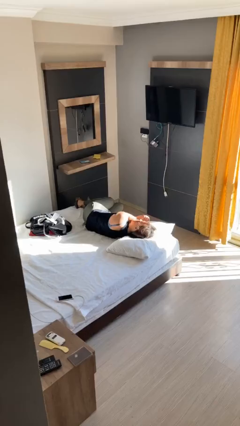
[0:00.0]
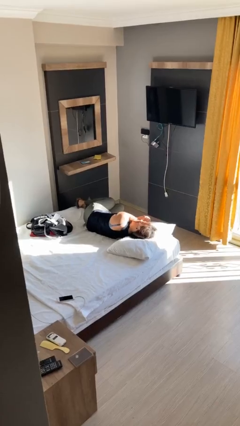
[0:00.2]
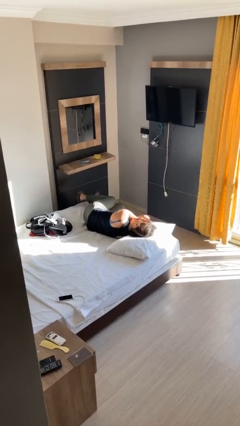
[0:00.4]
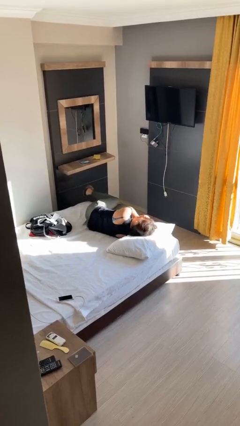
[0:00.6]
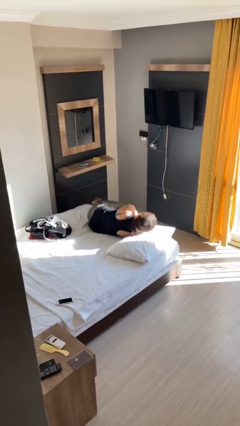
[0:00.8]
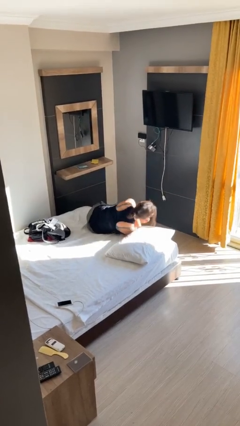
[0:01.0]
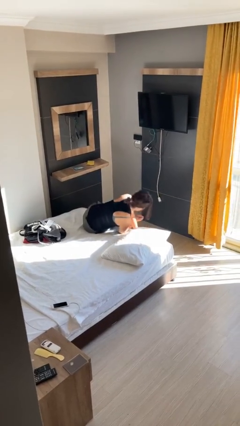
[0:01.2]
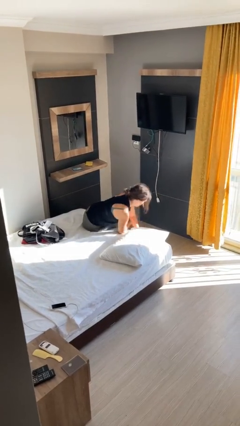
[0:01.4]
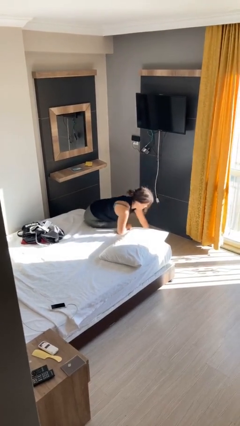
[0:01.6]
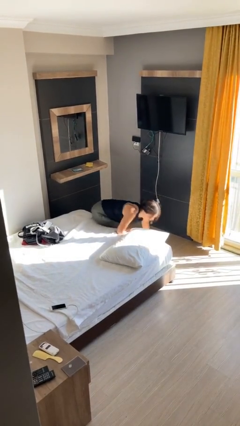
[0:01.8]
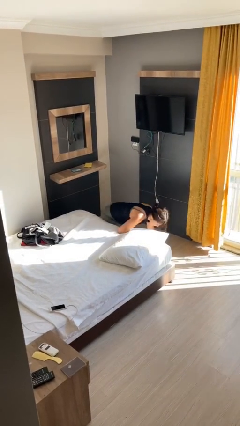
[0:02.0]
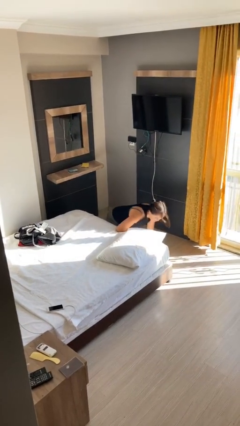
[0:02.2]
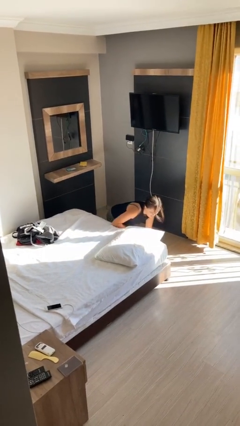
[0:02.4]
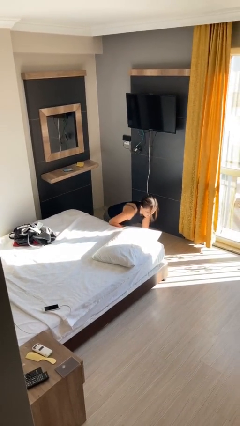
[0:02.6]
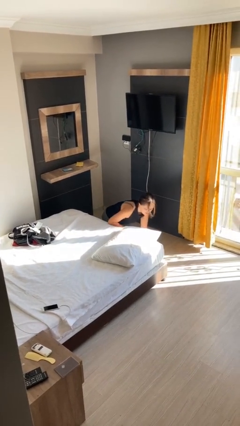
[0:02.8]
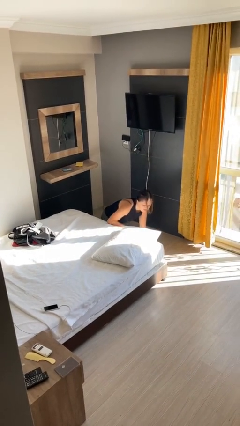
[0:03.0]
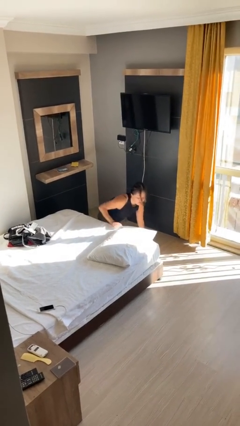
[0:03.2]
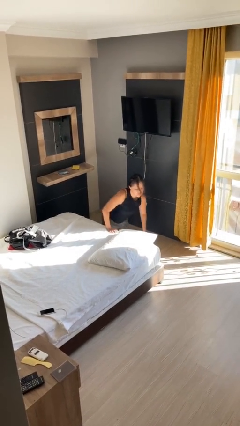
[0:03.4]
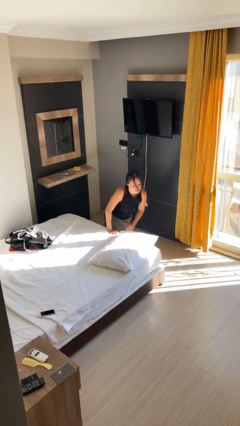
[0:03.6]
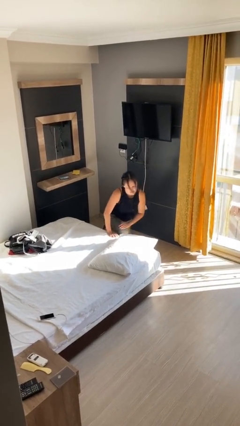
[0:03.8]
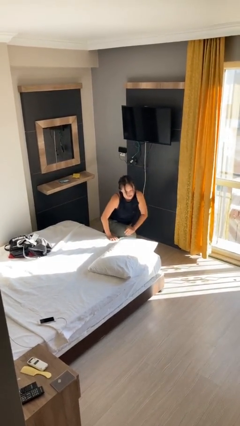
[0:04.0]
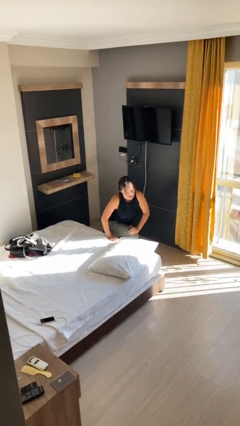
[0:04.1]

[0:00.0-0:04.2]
person falls from bed

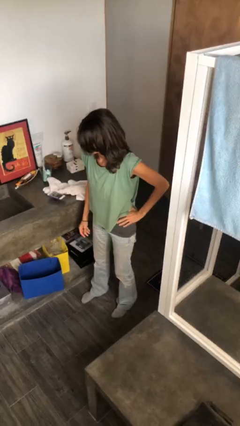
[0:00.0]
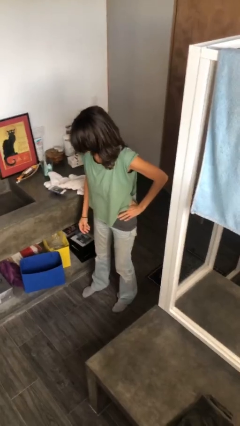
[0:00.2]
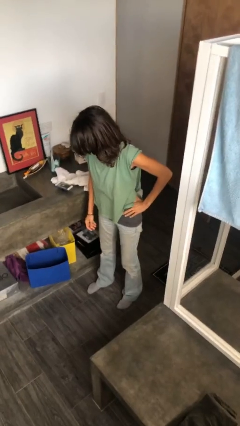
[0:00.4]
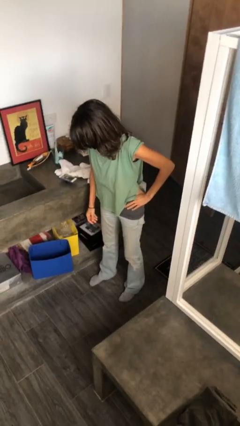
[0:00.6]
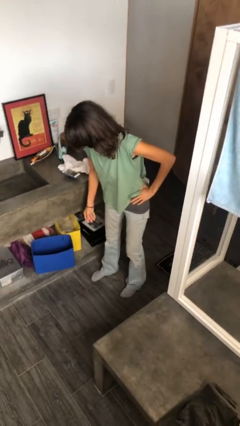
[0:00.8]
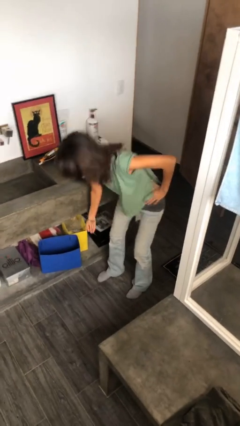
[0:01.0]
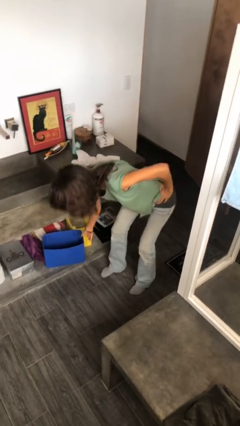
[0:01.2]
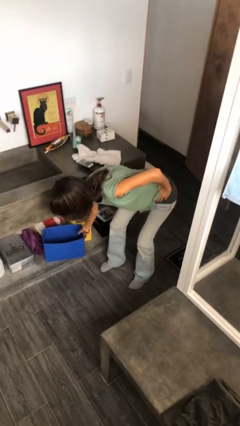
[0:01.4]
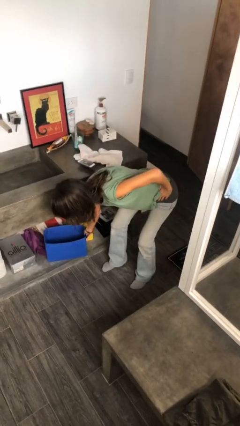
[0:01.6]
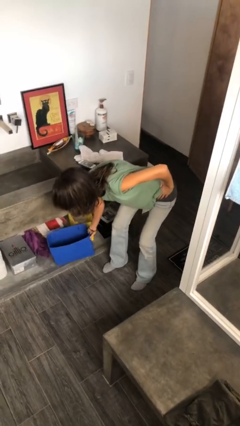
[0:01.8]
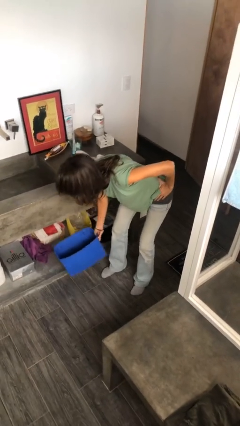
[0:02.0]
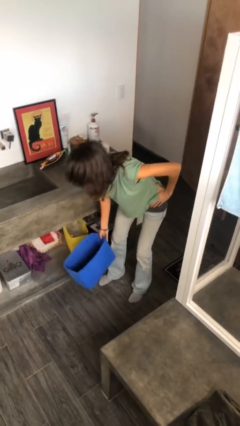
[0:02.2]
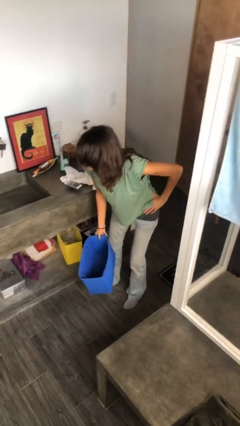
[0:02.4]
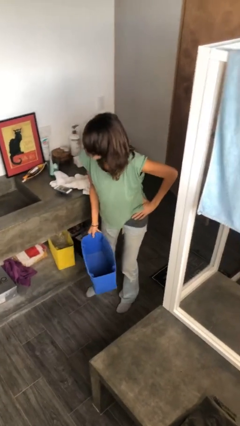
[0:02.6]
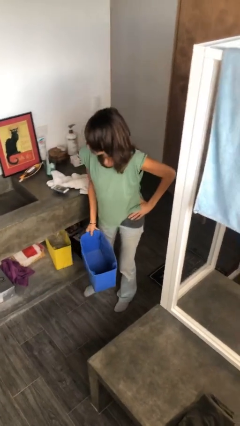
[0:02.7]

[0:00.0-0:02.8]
person picks up object from cabinet

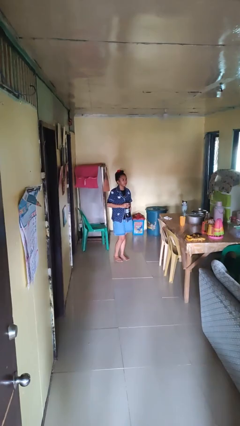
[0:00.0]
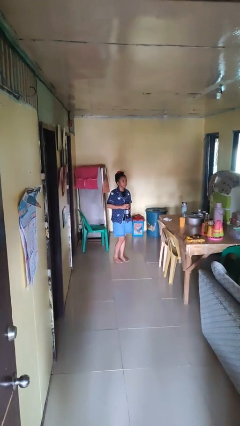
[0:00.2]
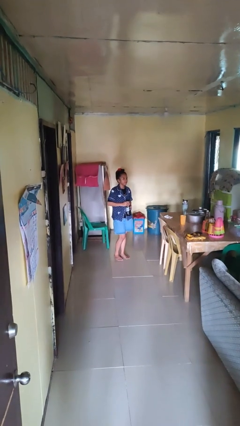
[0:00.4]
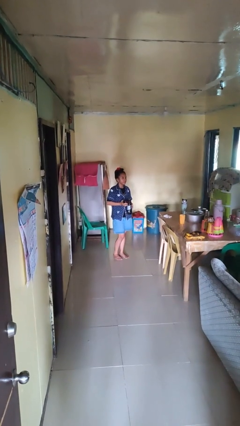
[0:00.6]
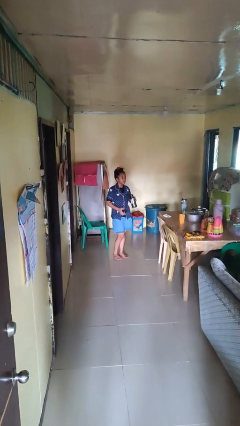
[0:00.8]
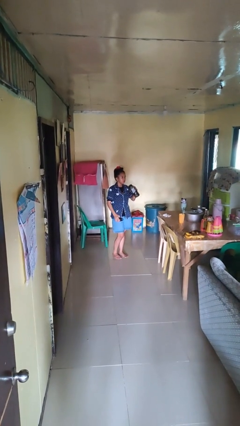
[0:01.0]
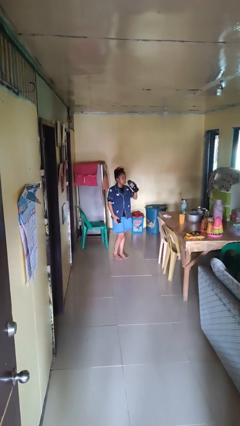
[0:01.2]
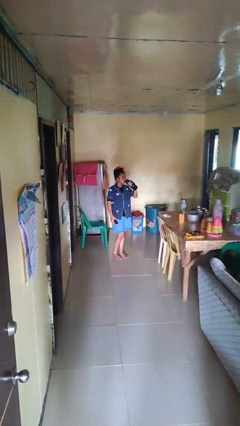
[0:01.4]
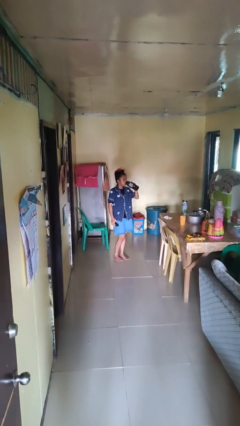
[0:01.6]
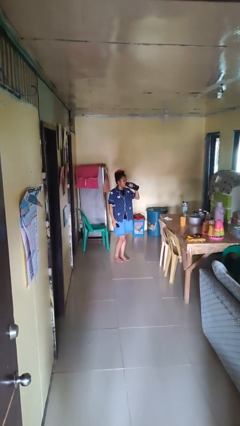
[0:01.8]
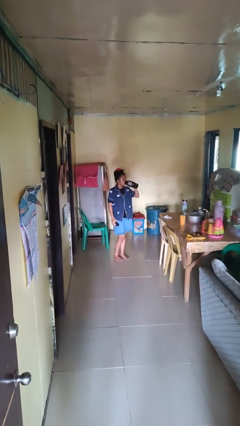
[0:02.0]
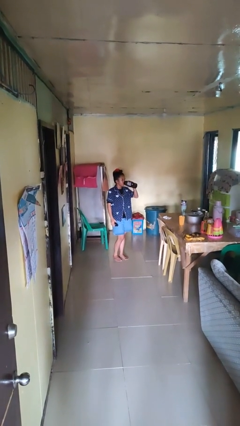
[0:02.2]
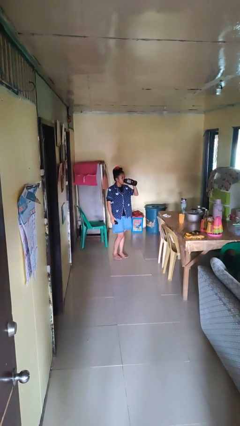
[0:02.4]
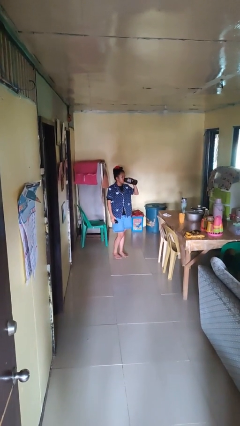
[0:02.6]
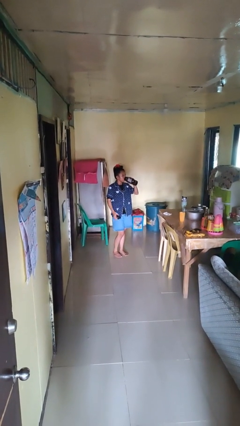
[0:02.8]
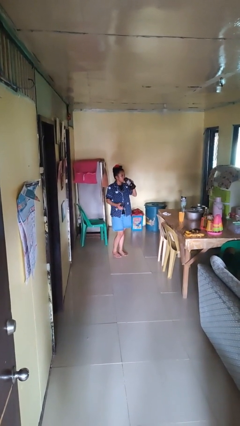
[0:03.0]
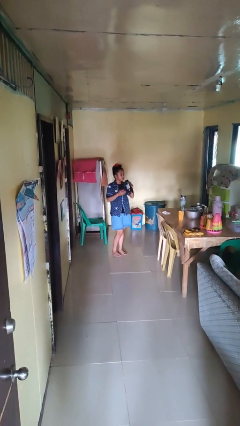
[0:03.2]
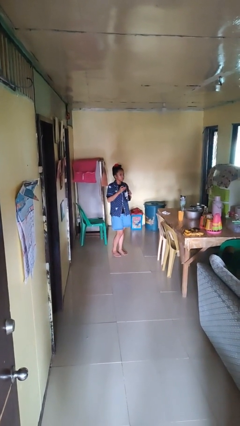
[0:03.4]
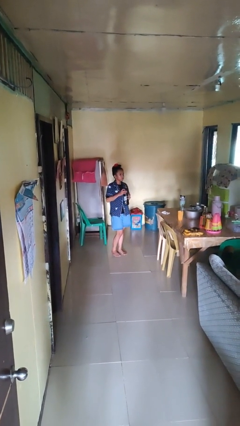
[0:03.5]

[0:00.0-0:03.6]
person drinks from bottle

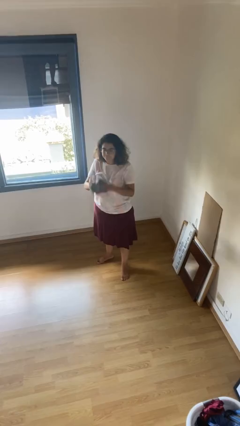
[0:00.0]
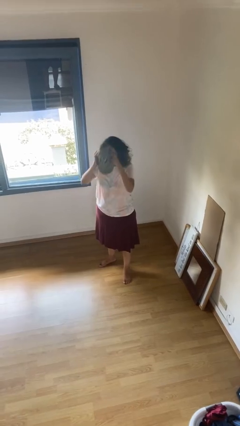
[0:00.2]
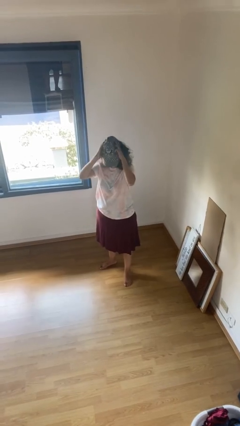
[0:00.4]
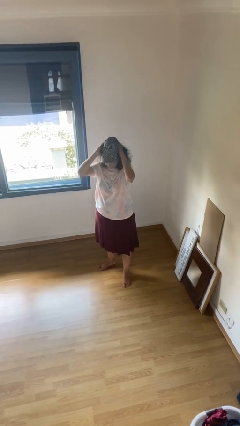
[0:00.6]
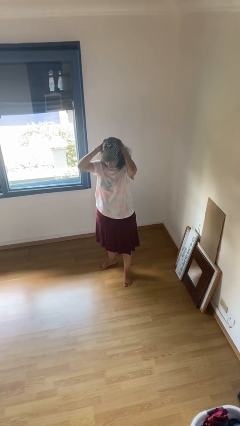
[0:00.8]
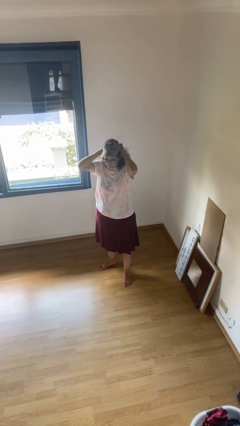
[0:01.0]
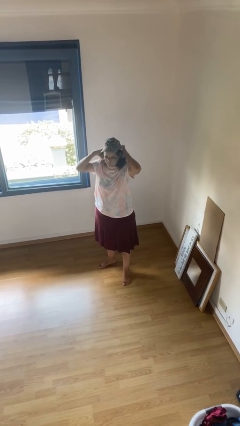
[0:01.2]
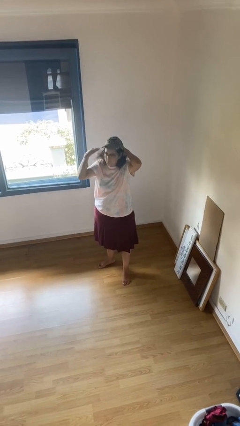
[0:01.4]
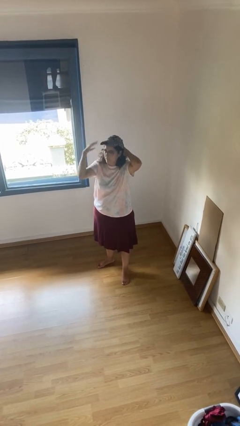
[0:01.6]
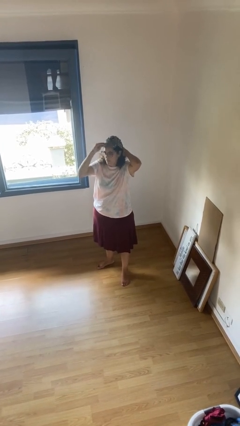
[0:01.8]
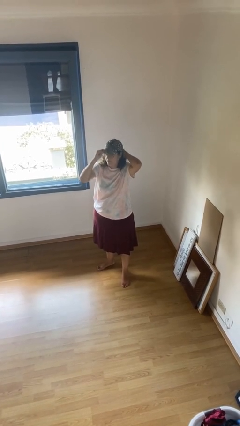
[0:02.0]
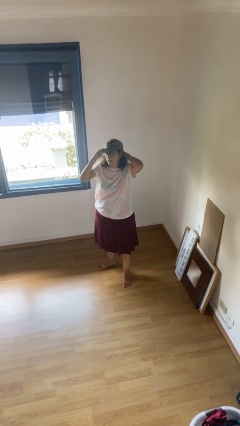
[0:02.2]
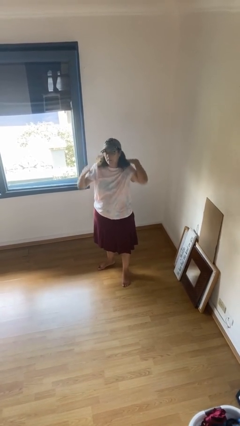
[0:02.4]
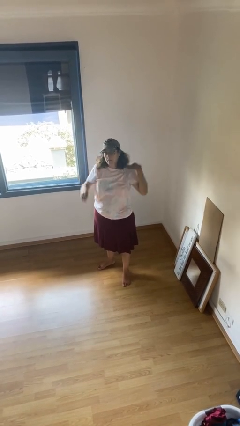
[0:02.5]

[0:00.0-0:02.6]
person puts on hat

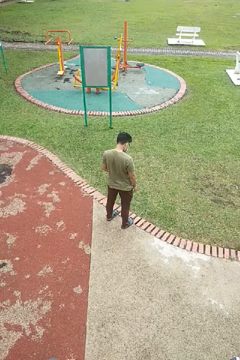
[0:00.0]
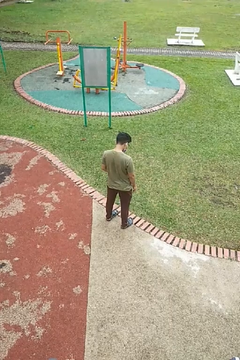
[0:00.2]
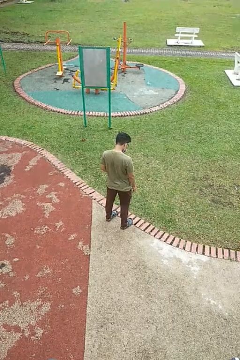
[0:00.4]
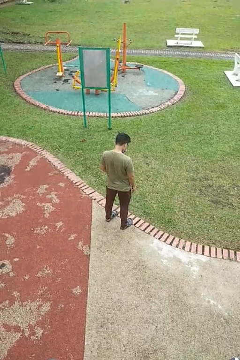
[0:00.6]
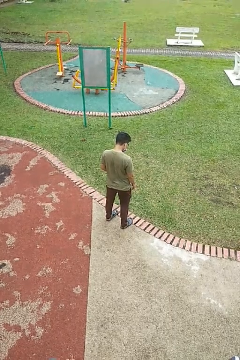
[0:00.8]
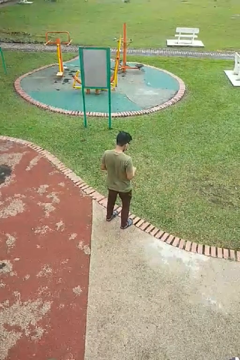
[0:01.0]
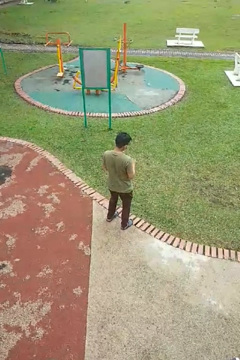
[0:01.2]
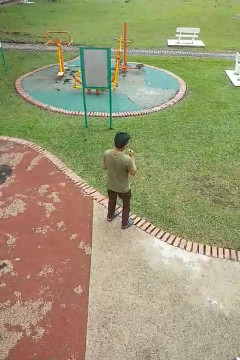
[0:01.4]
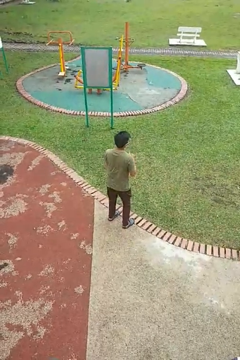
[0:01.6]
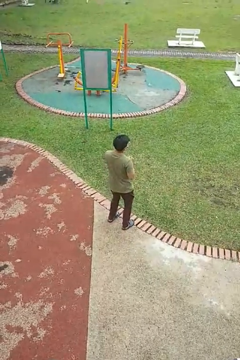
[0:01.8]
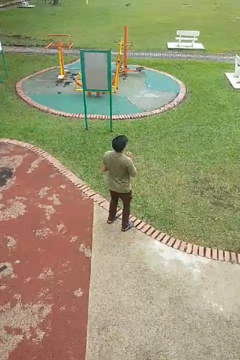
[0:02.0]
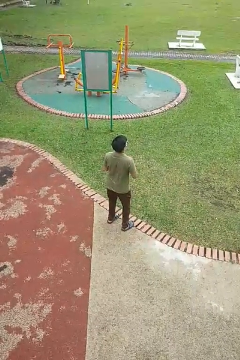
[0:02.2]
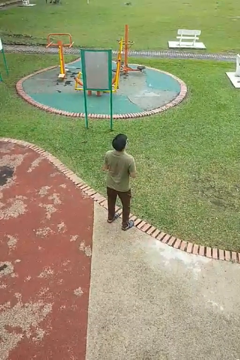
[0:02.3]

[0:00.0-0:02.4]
person wiggles hips

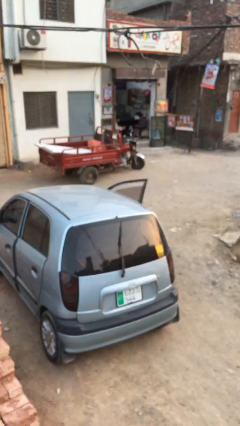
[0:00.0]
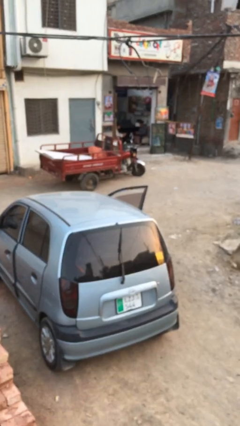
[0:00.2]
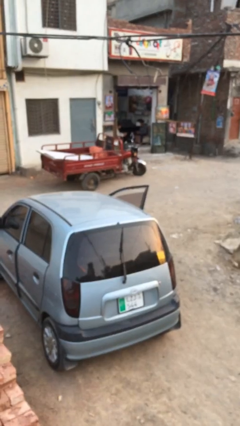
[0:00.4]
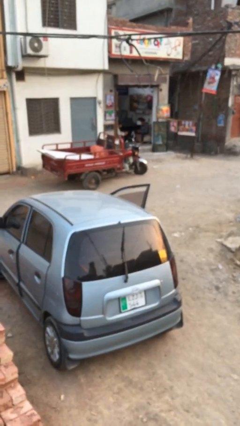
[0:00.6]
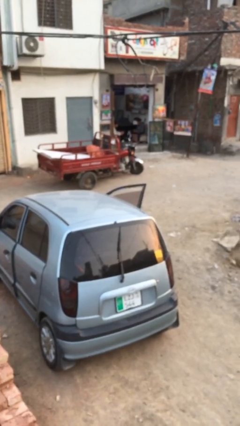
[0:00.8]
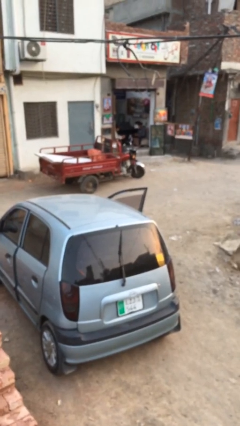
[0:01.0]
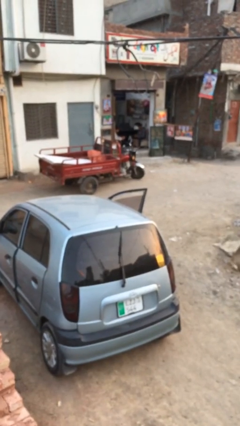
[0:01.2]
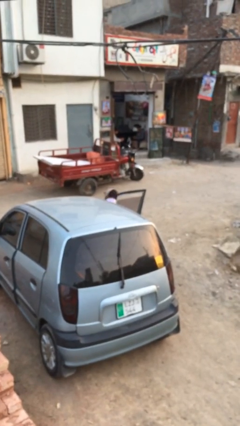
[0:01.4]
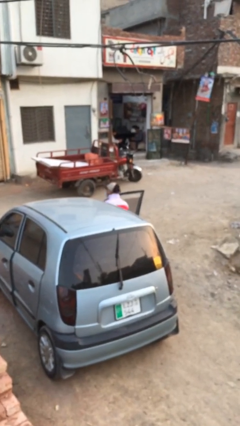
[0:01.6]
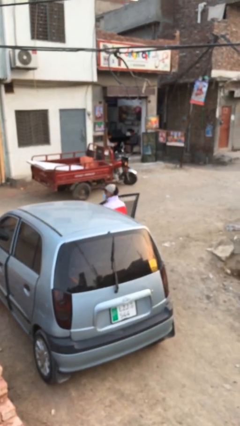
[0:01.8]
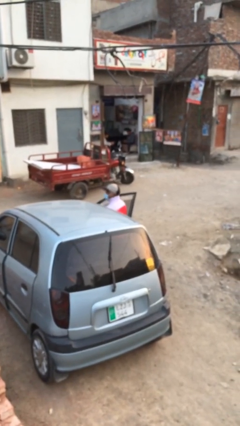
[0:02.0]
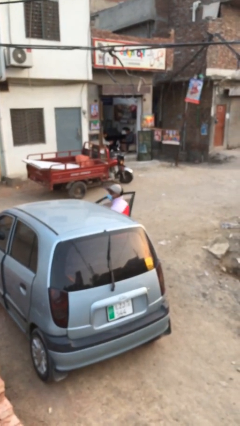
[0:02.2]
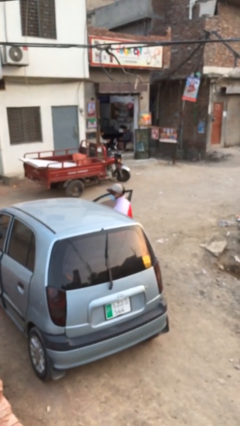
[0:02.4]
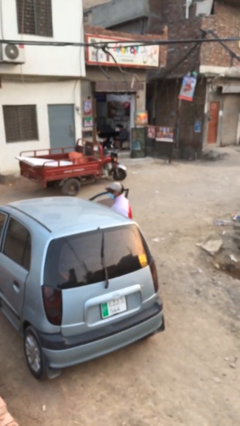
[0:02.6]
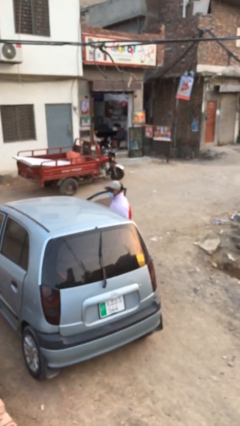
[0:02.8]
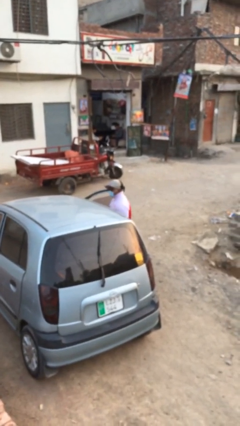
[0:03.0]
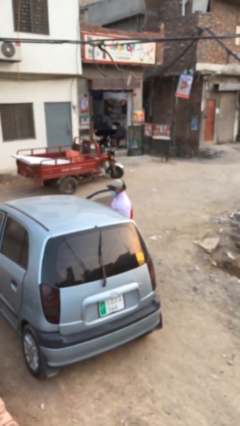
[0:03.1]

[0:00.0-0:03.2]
person exits car
